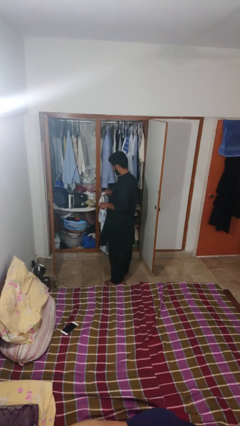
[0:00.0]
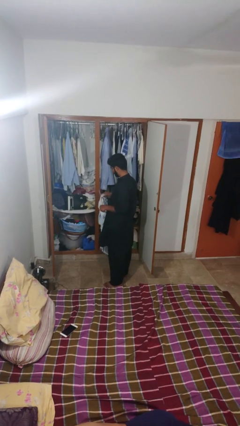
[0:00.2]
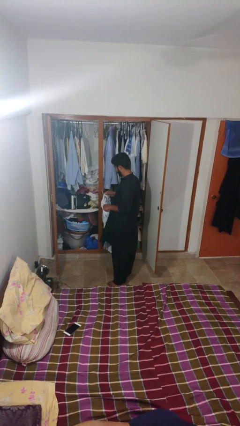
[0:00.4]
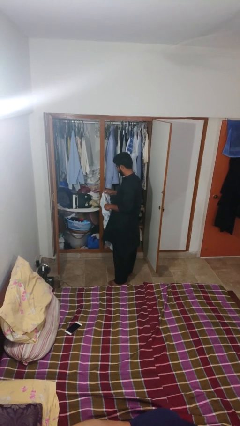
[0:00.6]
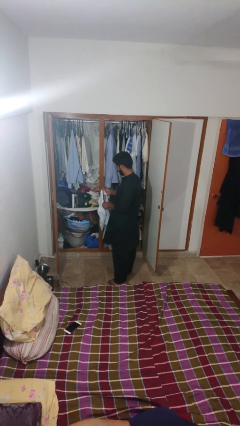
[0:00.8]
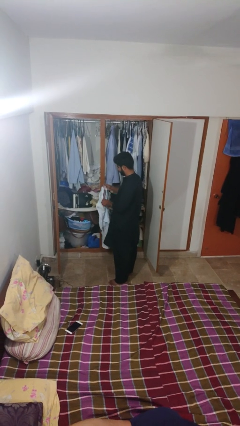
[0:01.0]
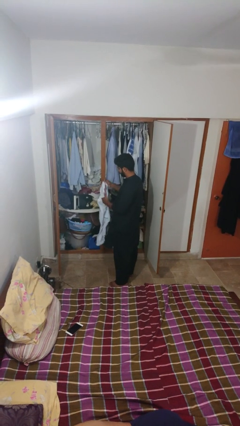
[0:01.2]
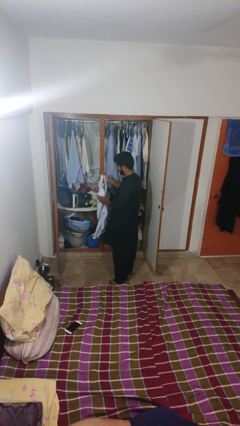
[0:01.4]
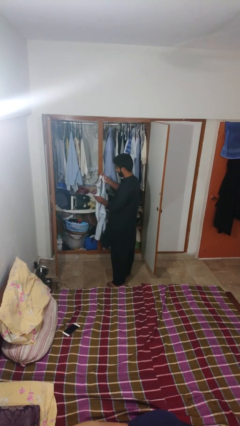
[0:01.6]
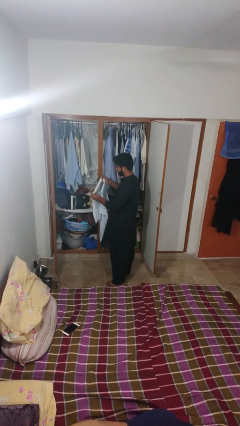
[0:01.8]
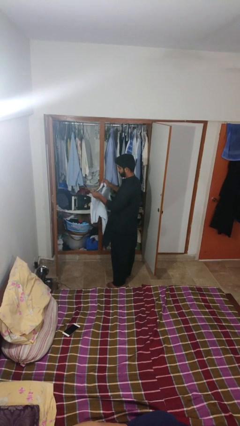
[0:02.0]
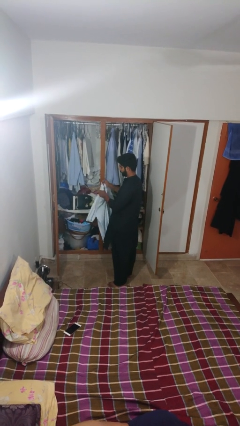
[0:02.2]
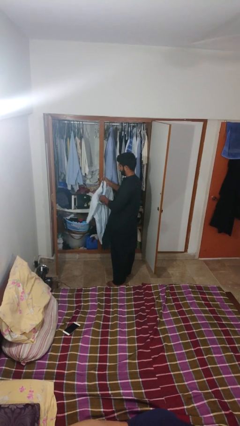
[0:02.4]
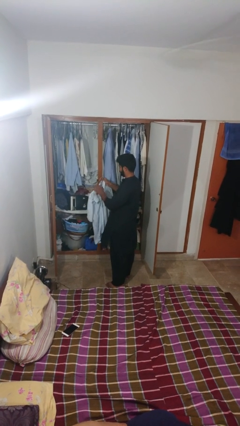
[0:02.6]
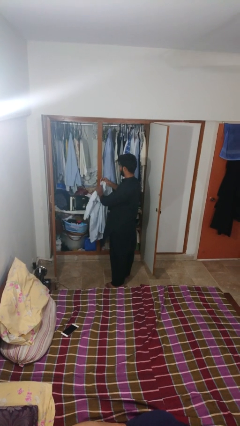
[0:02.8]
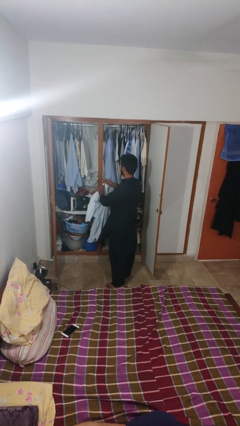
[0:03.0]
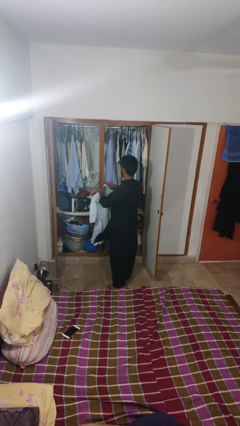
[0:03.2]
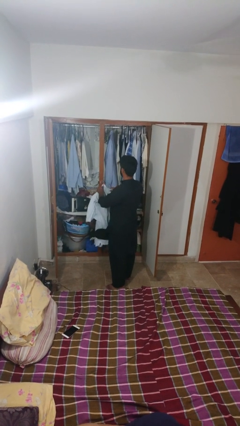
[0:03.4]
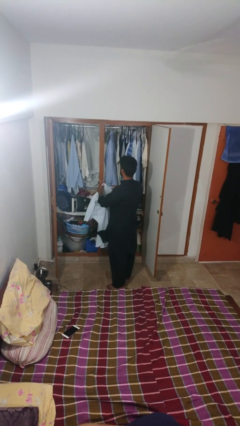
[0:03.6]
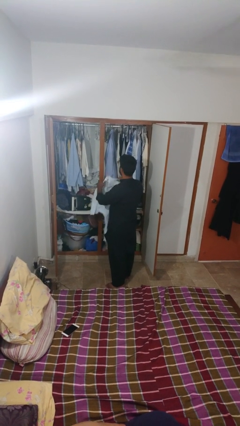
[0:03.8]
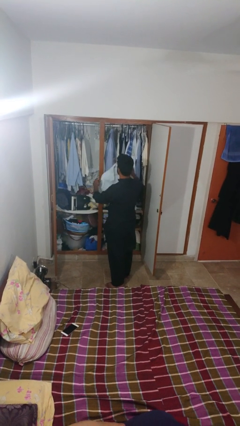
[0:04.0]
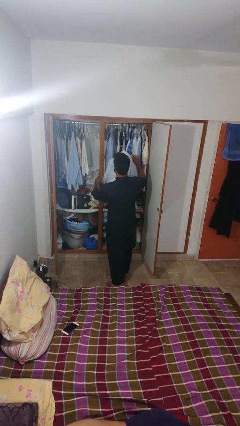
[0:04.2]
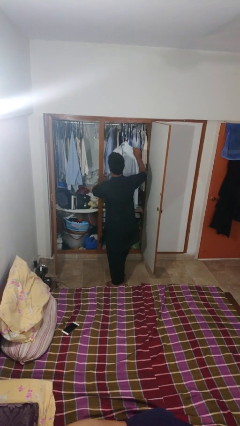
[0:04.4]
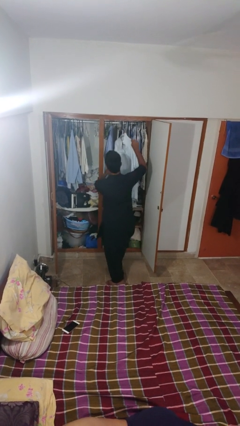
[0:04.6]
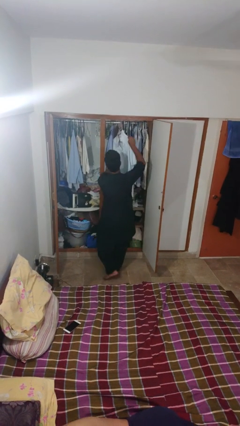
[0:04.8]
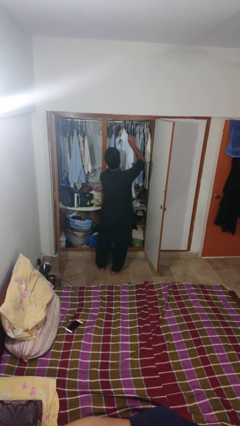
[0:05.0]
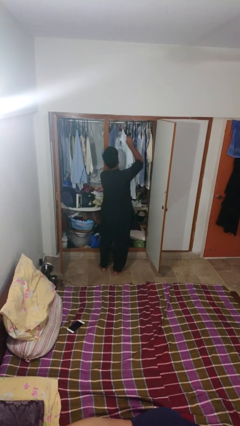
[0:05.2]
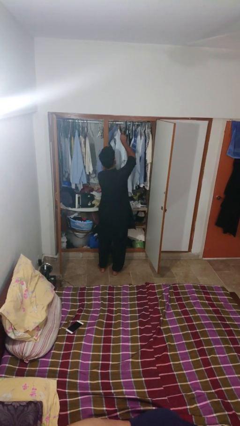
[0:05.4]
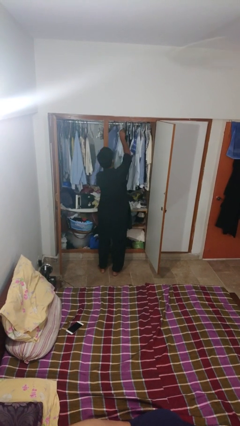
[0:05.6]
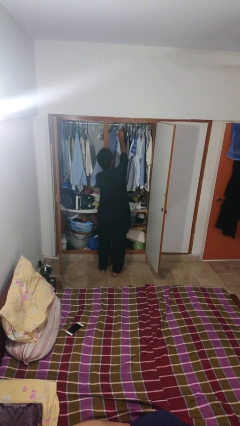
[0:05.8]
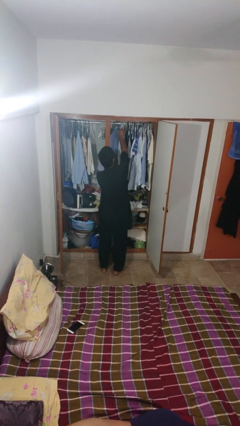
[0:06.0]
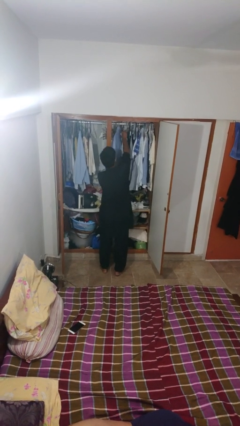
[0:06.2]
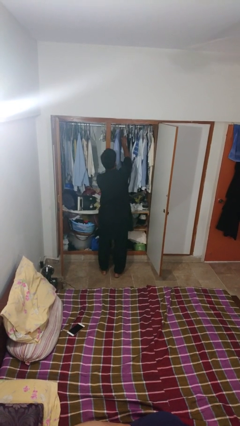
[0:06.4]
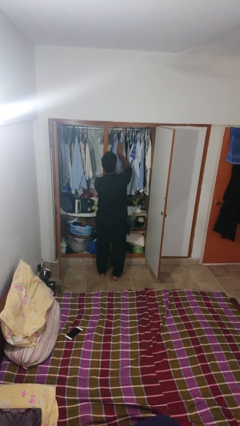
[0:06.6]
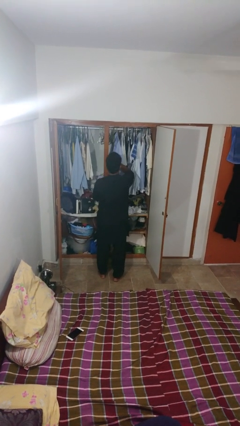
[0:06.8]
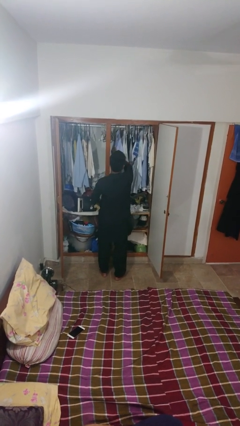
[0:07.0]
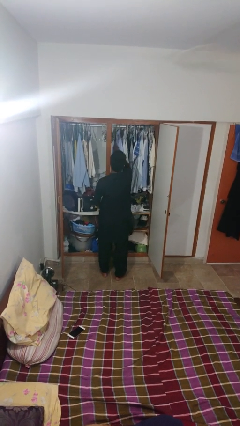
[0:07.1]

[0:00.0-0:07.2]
person puts clothes into closet

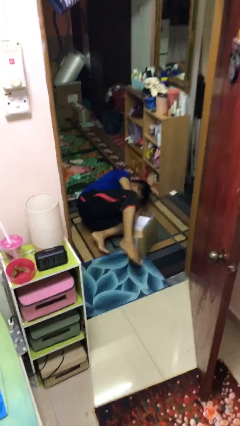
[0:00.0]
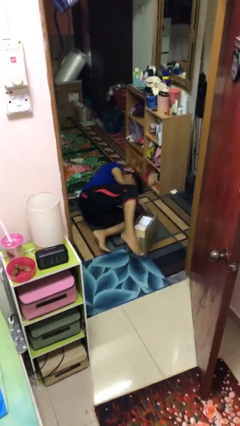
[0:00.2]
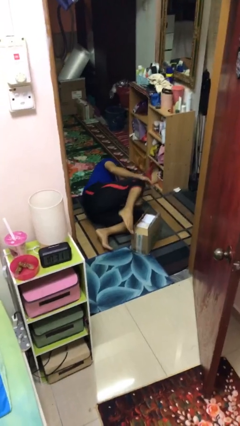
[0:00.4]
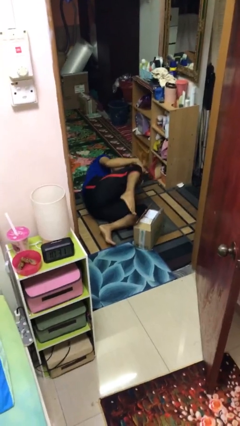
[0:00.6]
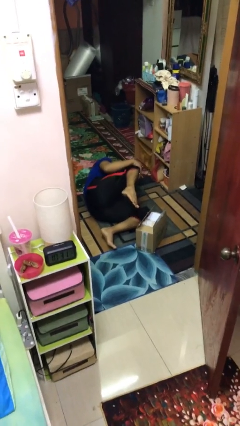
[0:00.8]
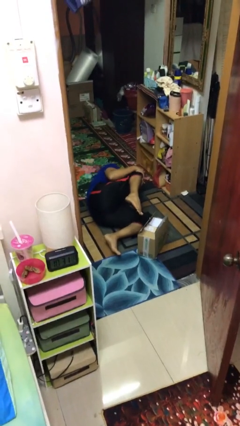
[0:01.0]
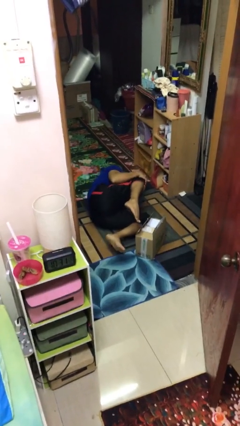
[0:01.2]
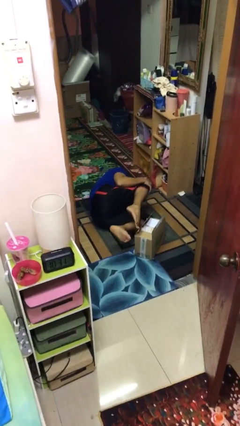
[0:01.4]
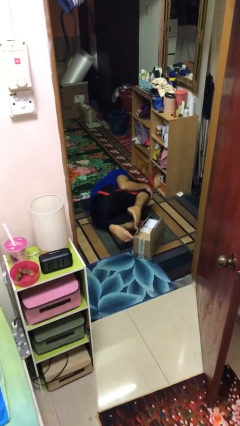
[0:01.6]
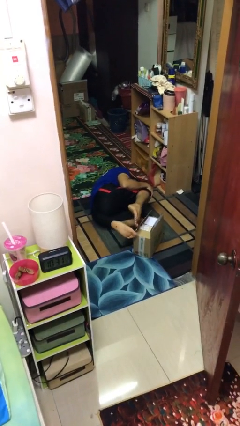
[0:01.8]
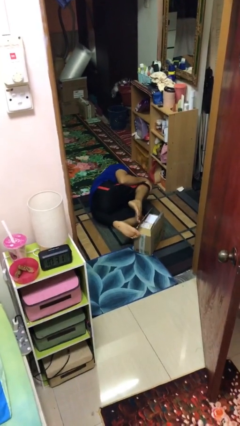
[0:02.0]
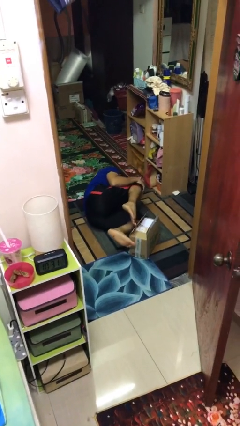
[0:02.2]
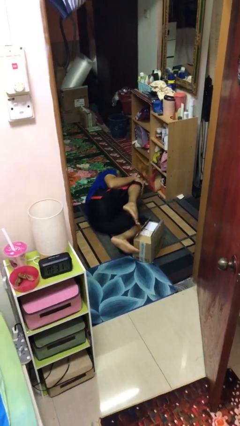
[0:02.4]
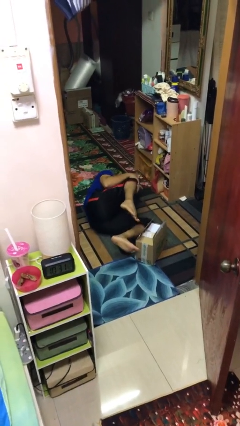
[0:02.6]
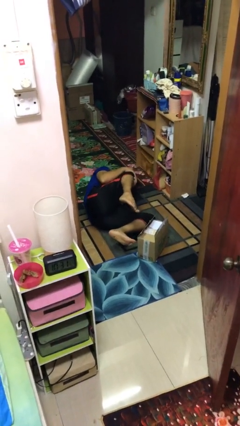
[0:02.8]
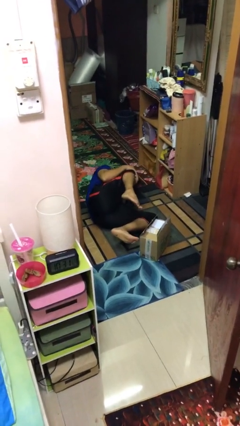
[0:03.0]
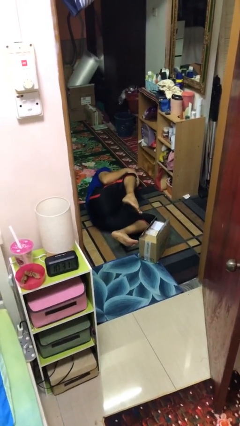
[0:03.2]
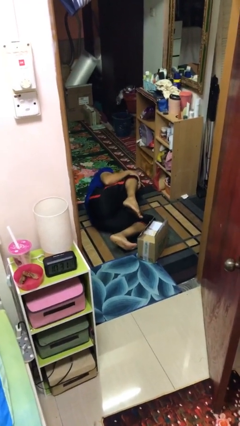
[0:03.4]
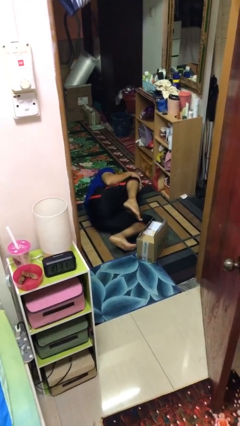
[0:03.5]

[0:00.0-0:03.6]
person lies down on floor

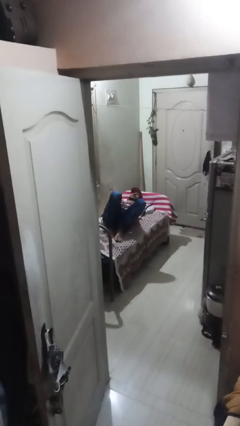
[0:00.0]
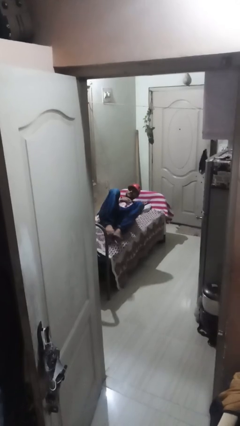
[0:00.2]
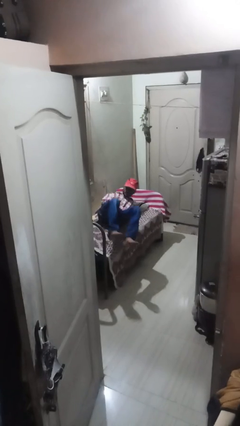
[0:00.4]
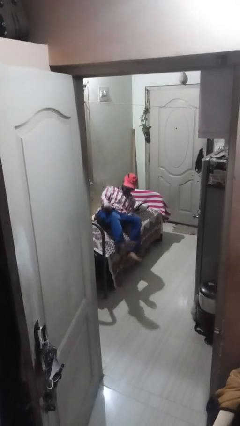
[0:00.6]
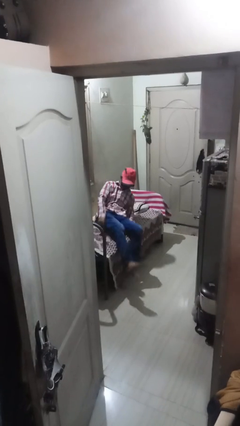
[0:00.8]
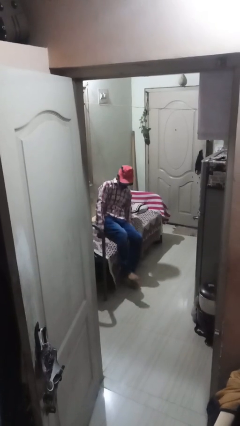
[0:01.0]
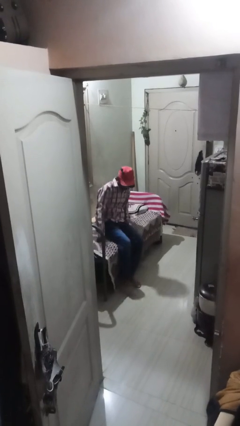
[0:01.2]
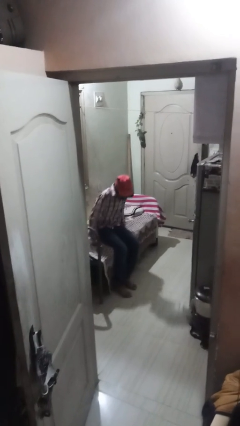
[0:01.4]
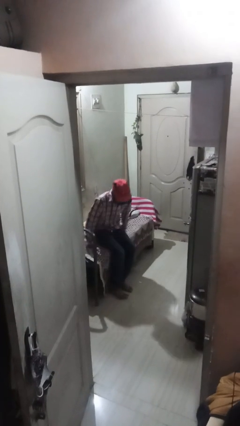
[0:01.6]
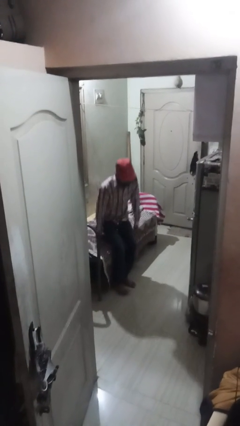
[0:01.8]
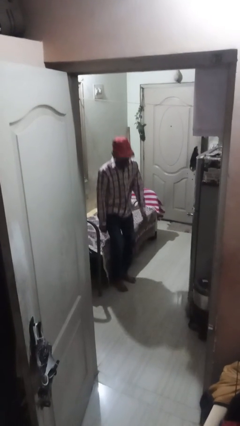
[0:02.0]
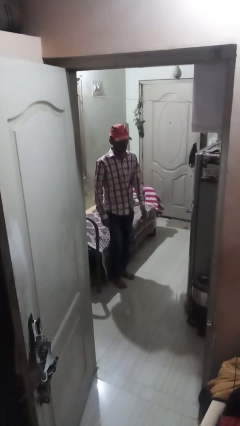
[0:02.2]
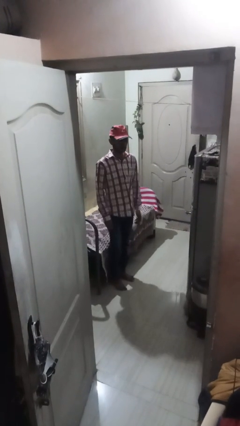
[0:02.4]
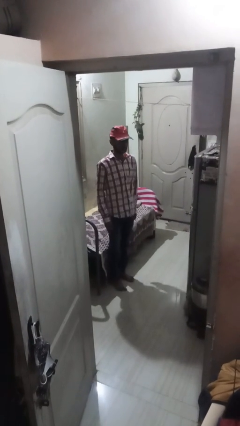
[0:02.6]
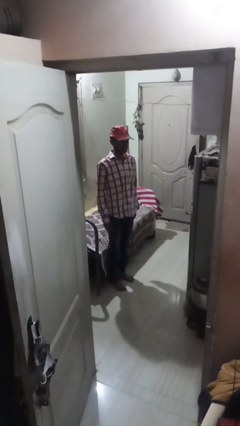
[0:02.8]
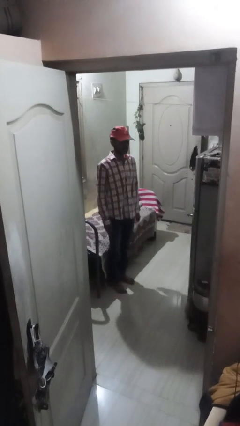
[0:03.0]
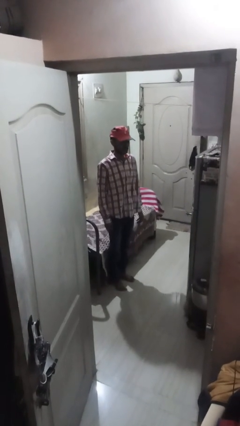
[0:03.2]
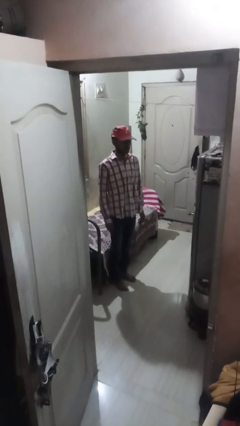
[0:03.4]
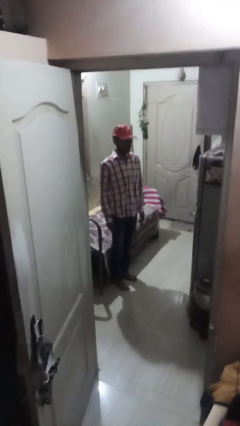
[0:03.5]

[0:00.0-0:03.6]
person stands up

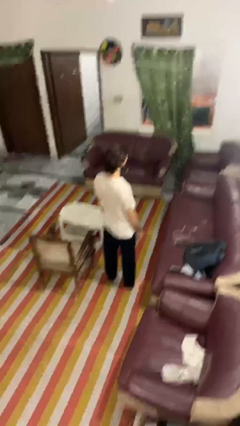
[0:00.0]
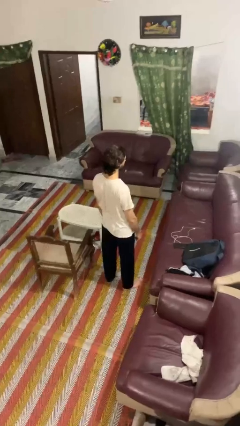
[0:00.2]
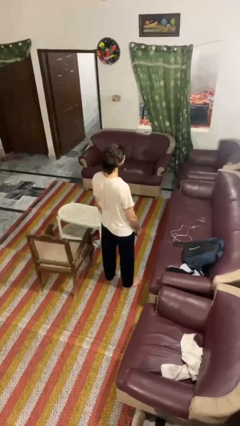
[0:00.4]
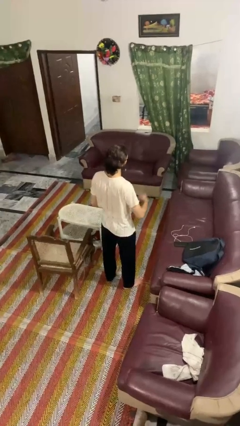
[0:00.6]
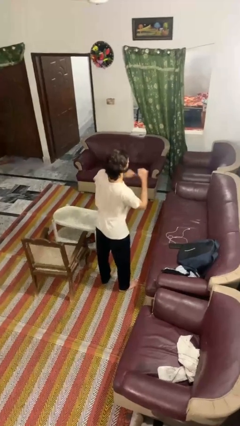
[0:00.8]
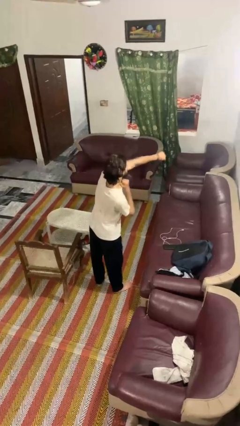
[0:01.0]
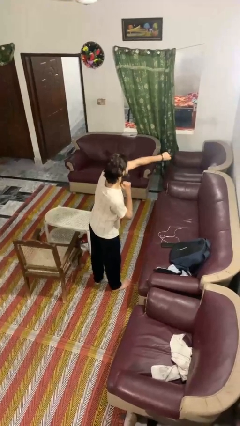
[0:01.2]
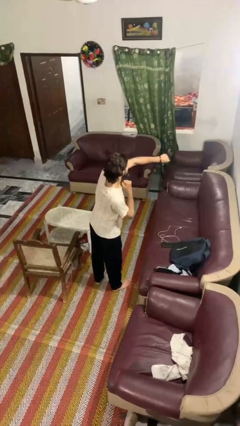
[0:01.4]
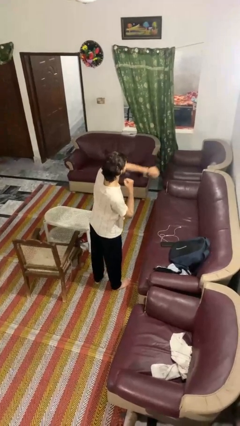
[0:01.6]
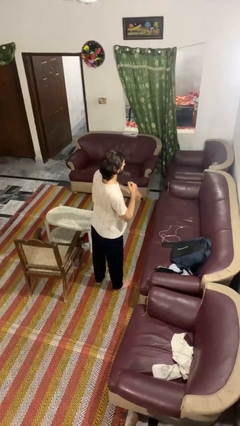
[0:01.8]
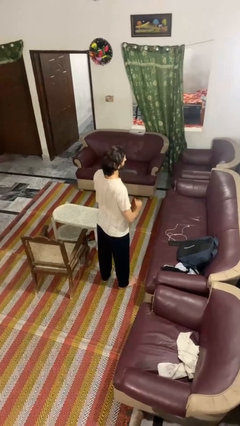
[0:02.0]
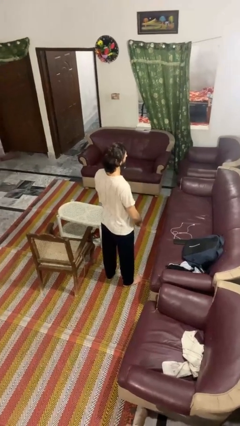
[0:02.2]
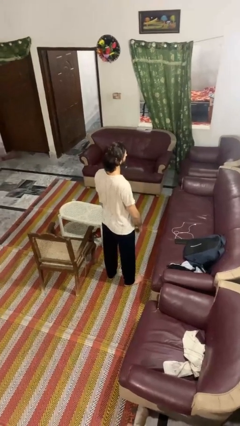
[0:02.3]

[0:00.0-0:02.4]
person punches

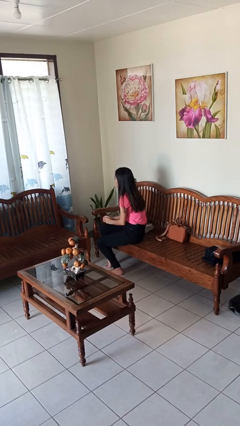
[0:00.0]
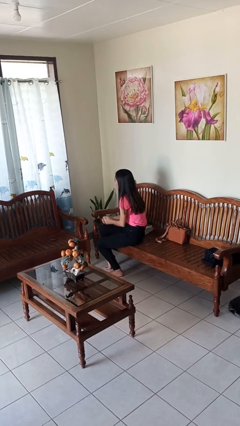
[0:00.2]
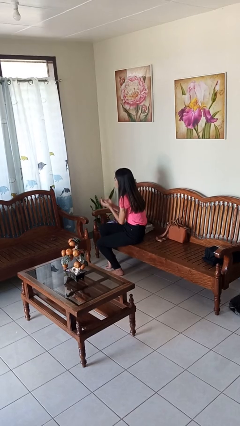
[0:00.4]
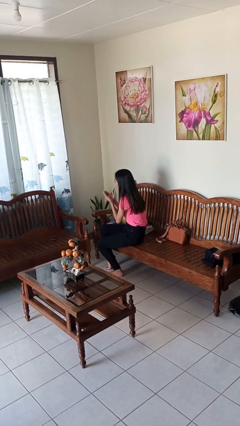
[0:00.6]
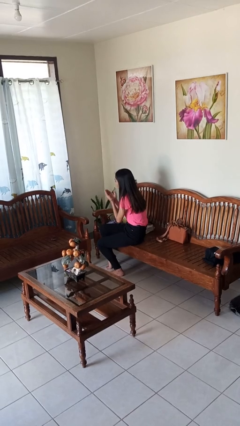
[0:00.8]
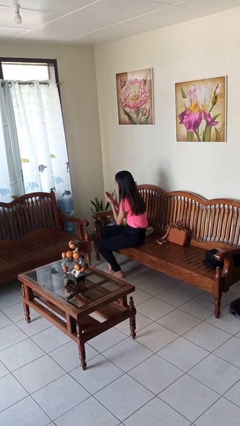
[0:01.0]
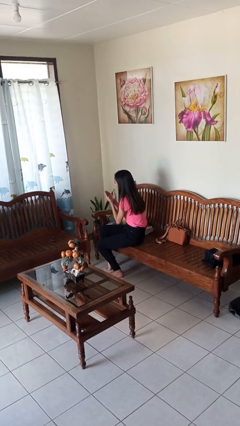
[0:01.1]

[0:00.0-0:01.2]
person blows into hands
